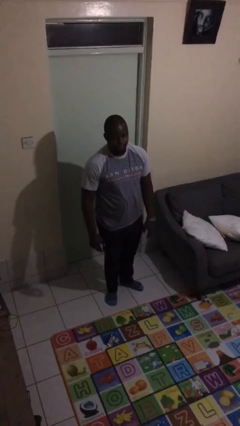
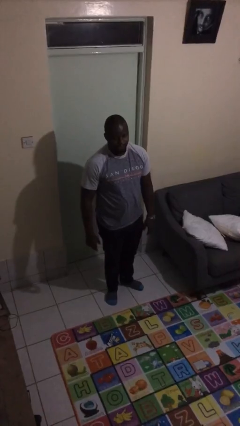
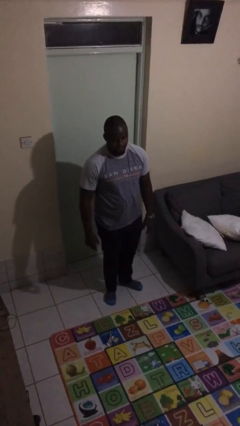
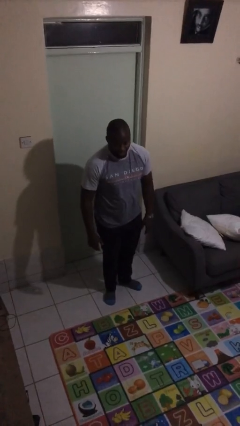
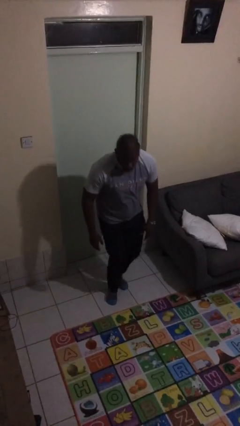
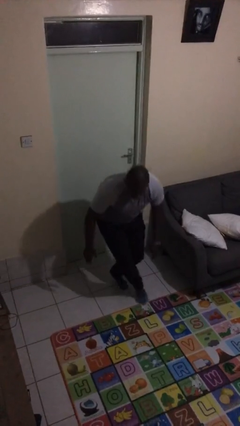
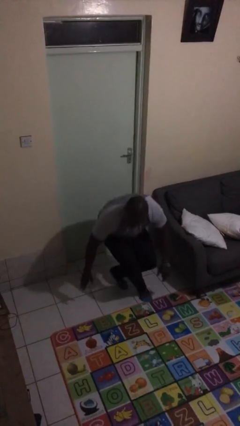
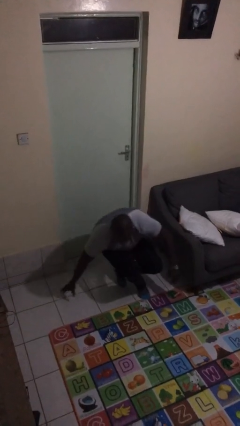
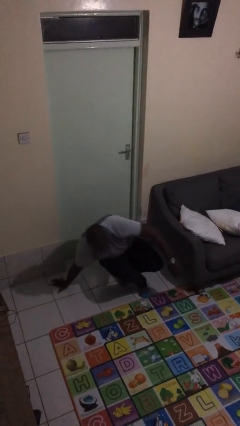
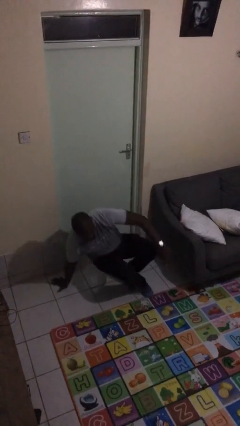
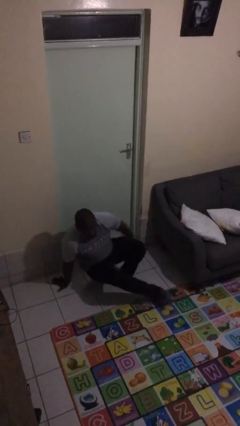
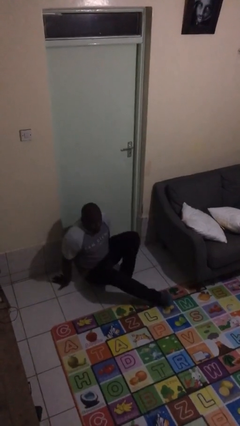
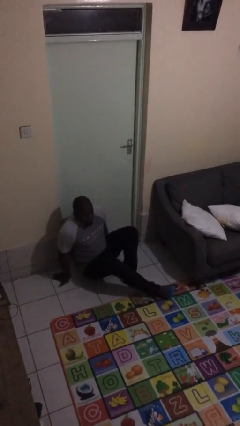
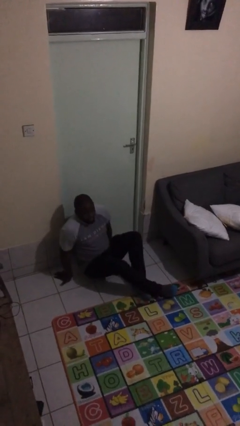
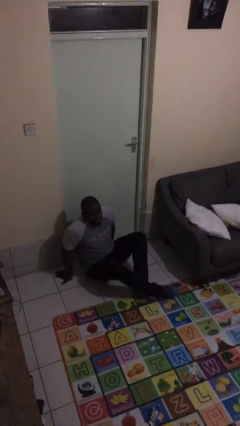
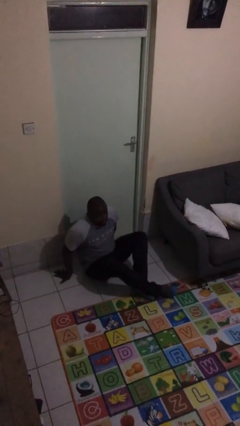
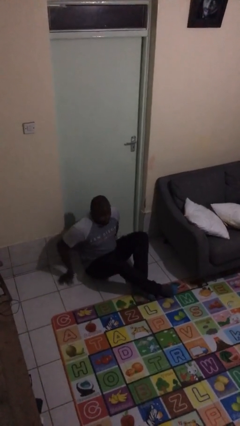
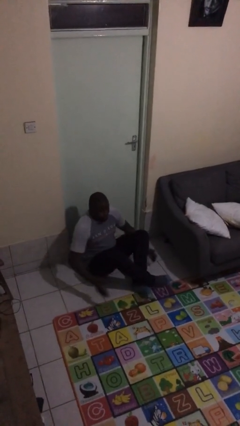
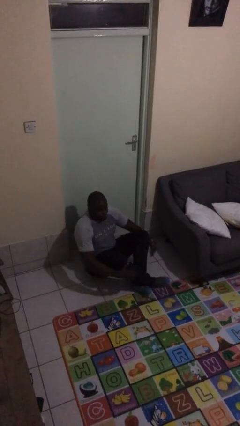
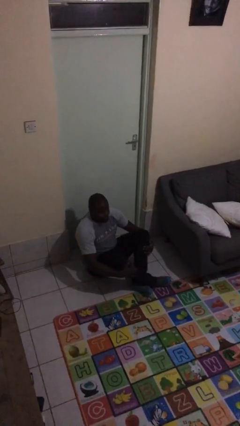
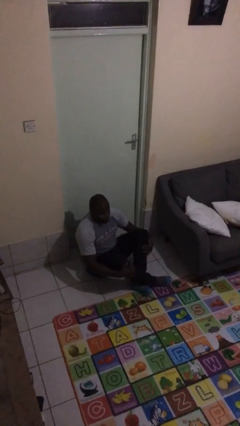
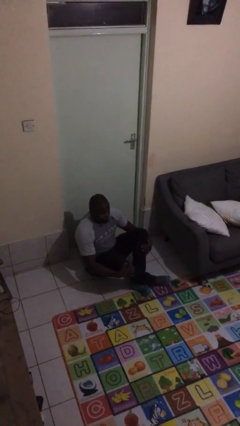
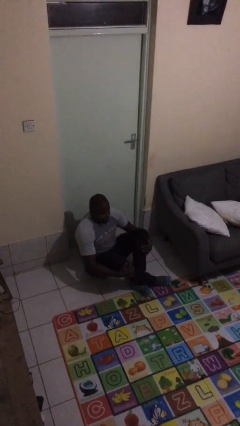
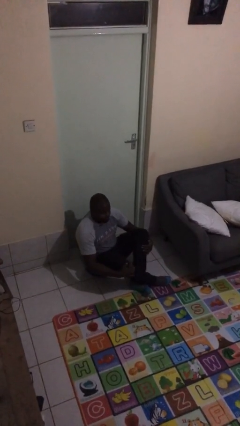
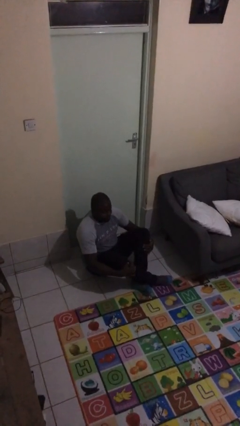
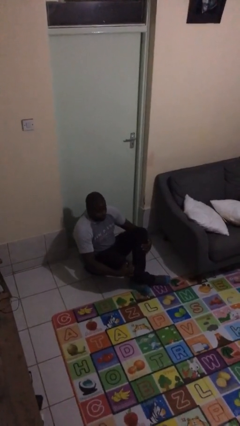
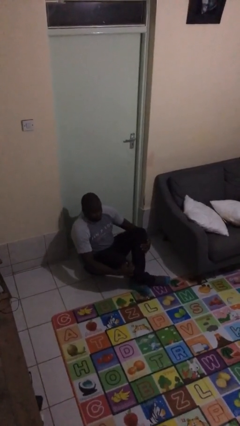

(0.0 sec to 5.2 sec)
person sits crisscross

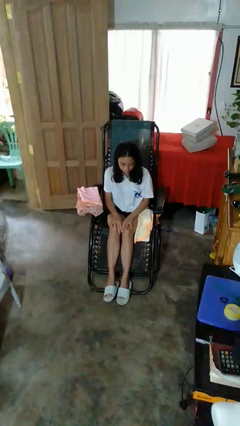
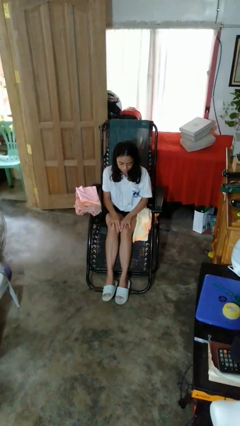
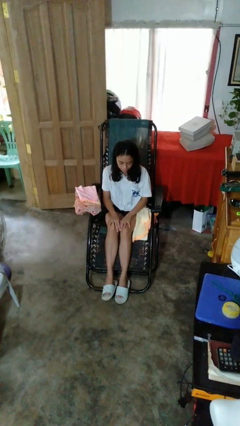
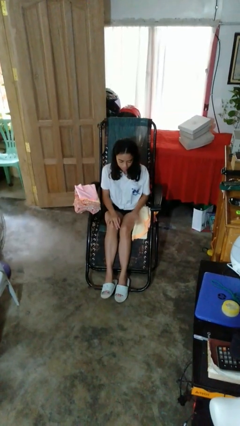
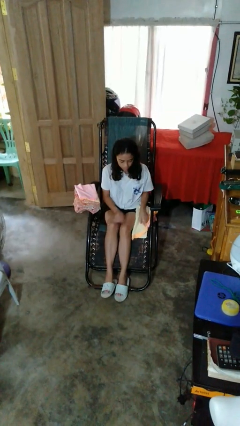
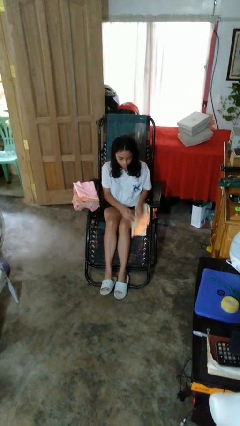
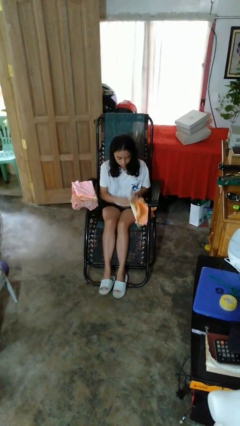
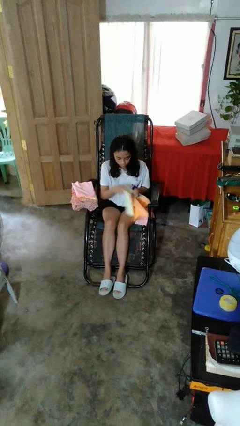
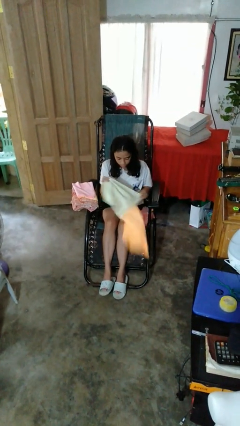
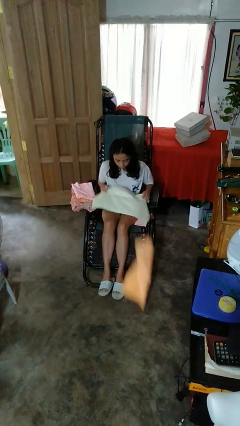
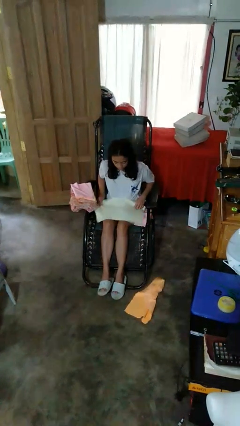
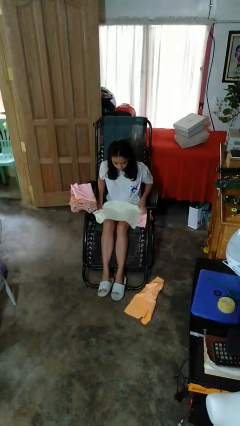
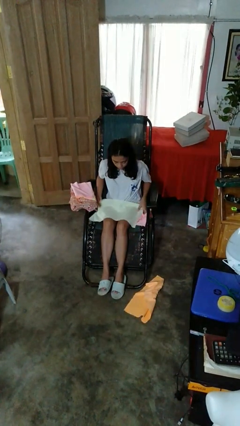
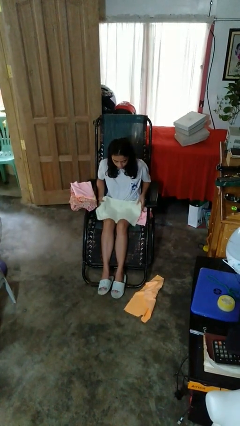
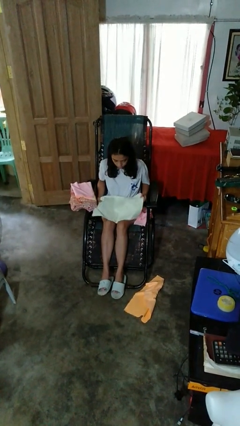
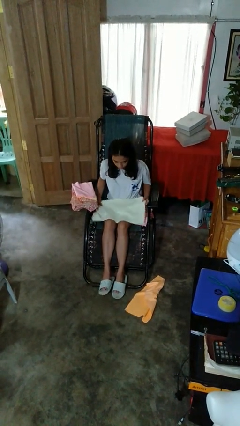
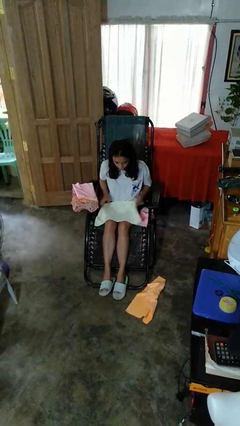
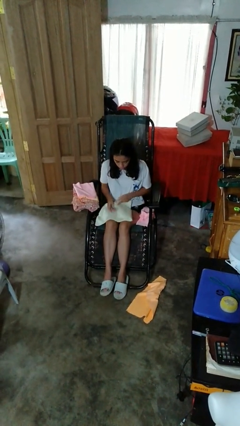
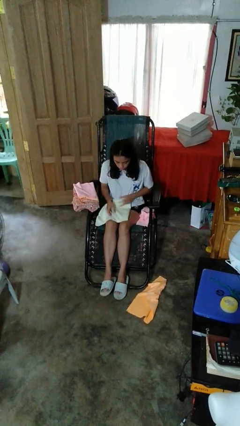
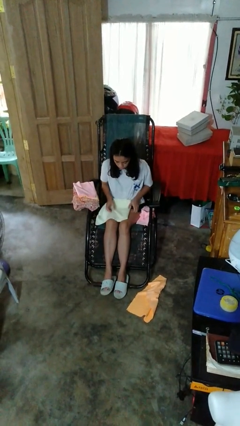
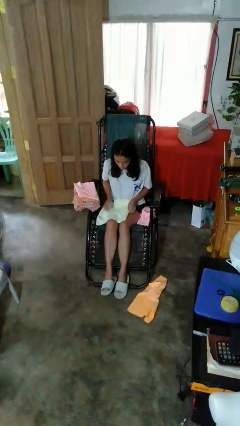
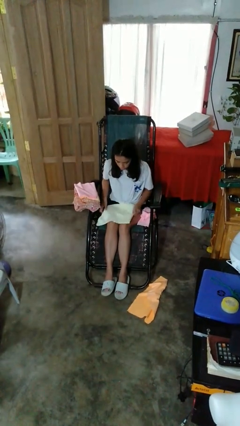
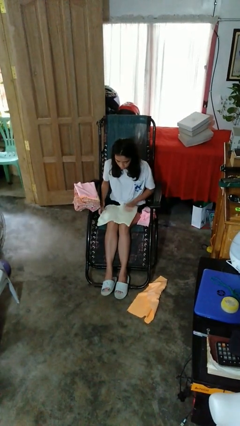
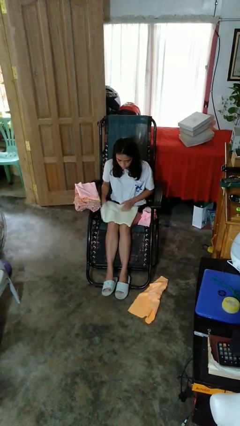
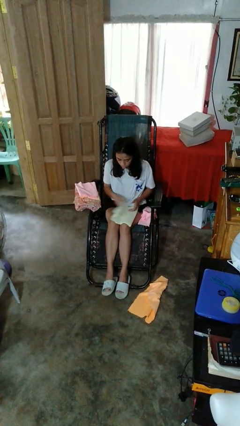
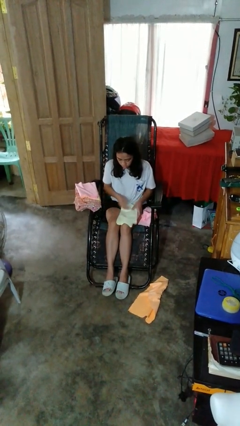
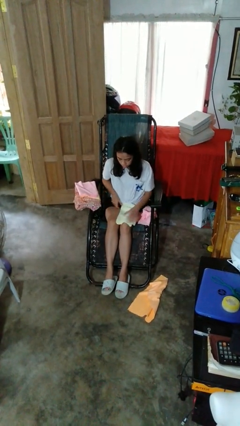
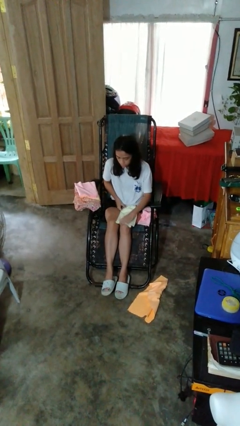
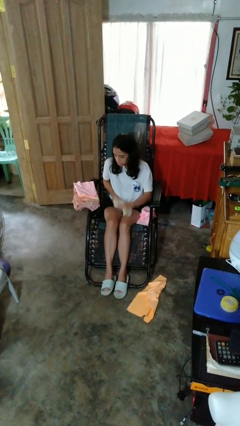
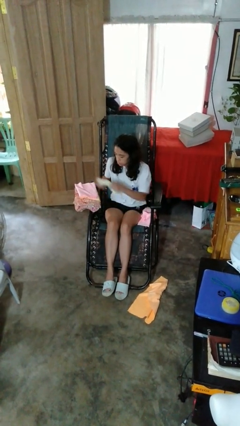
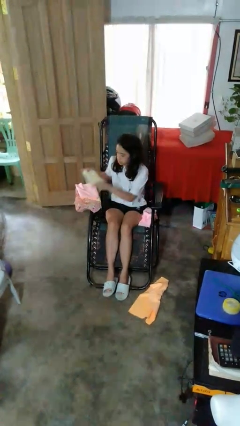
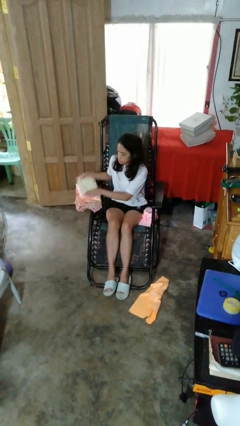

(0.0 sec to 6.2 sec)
person folds towel

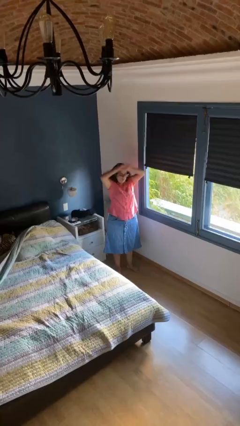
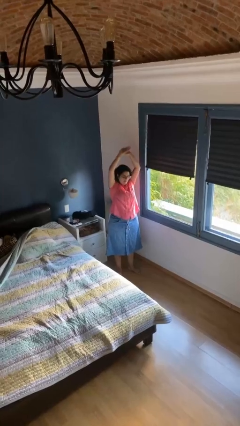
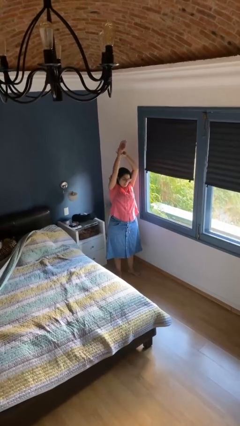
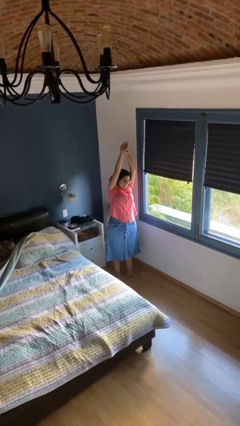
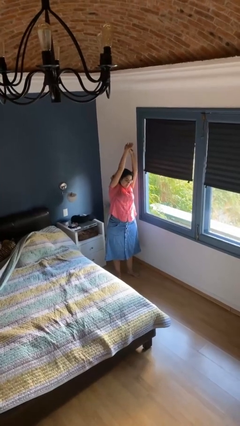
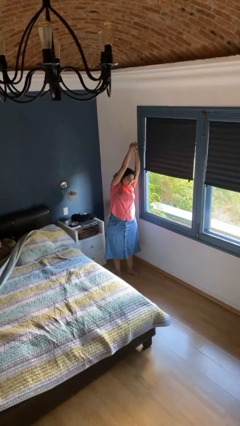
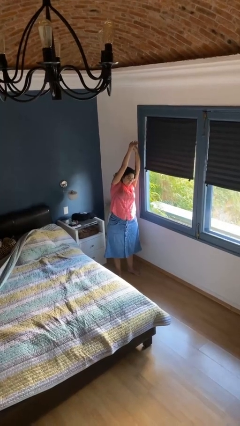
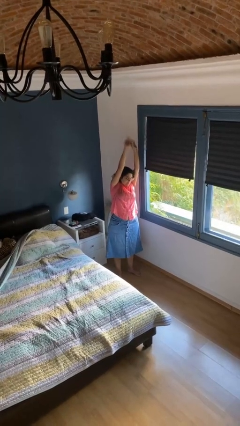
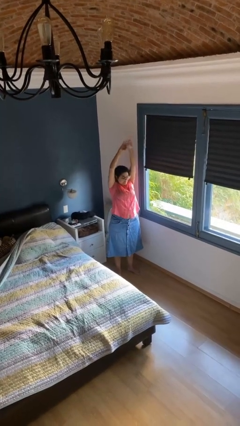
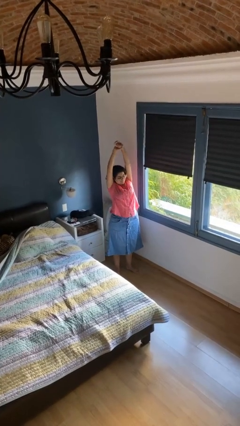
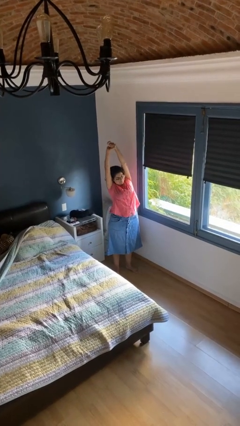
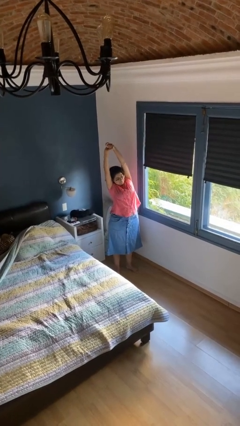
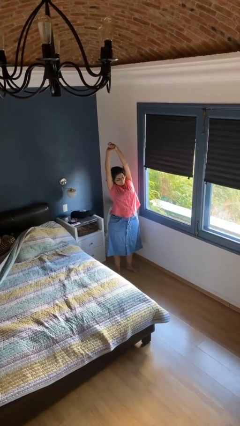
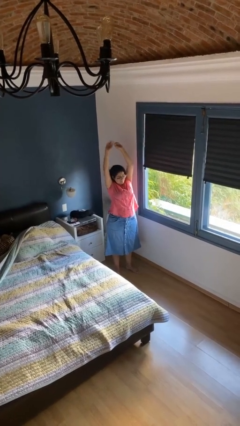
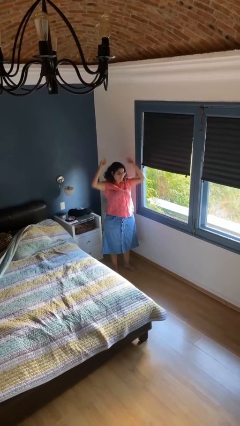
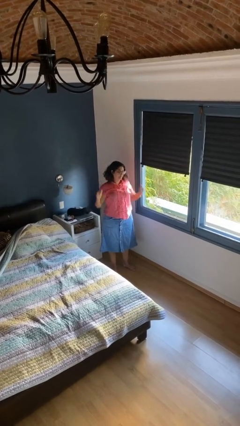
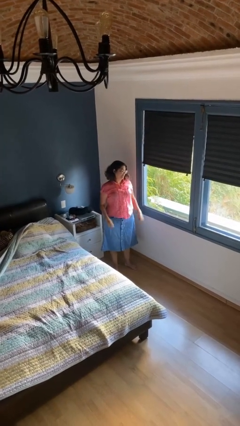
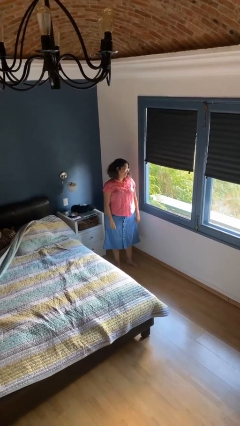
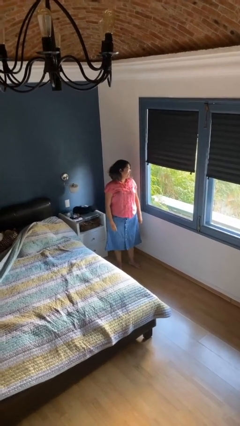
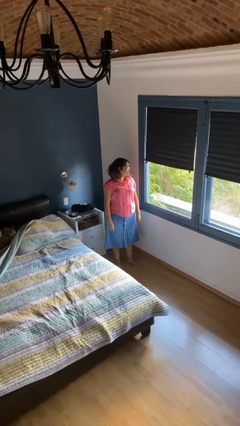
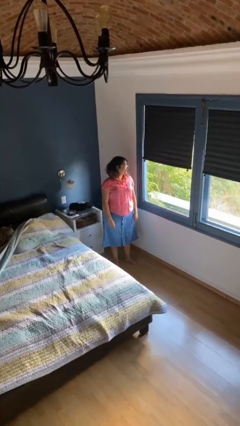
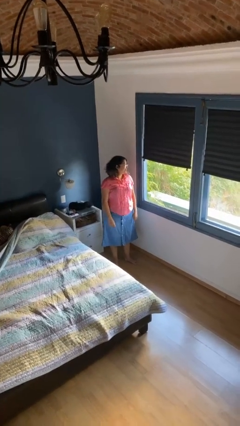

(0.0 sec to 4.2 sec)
person stretches arms over head

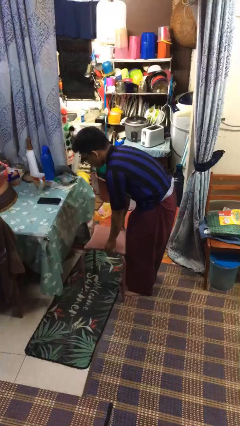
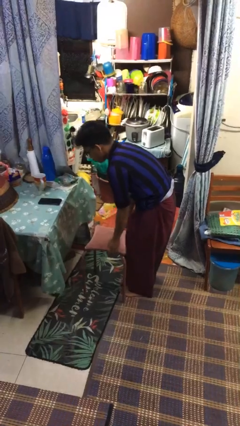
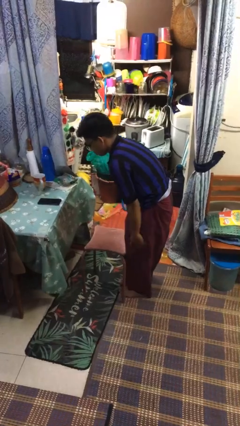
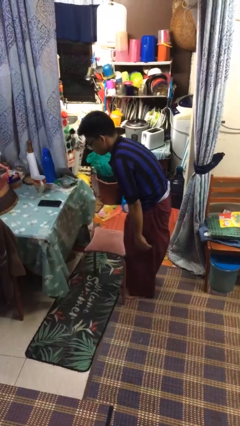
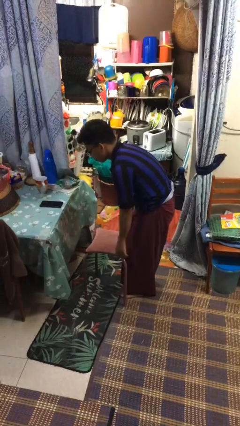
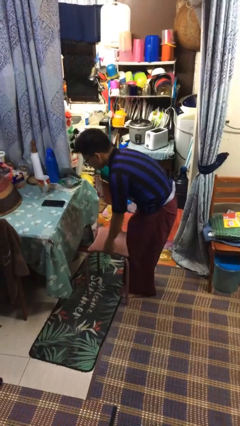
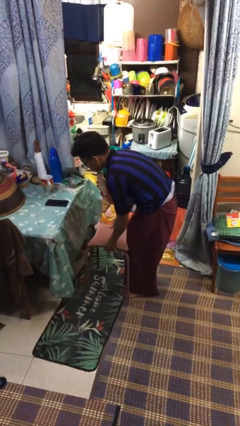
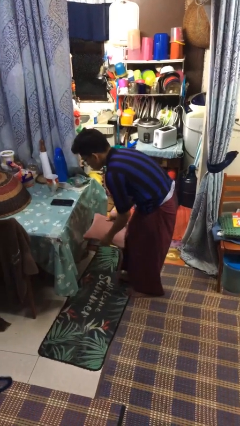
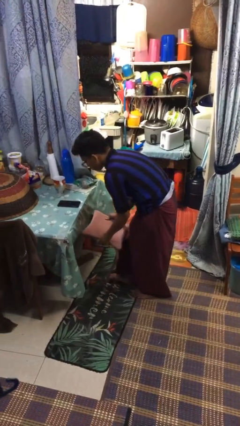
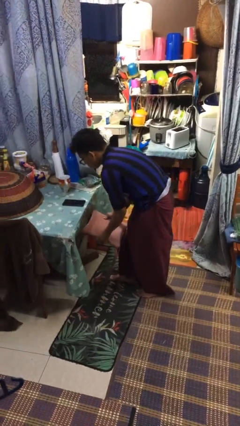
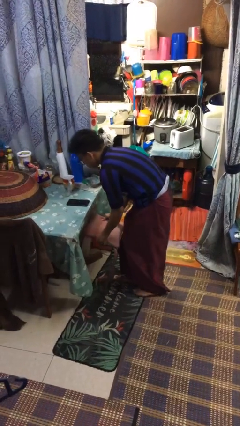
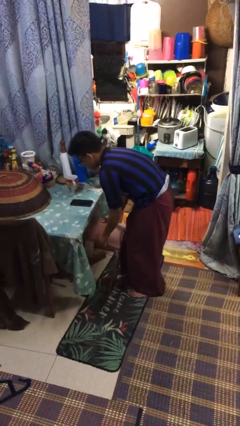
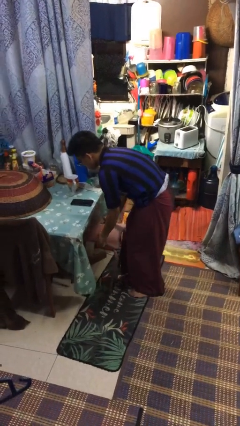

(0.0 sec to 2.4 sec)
person pushes in chair
